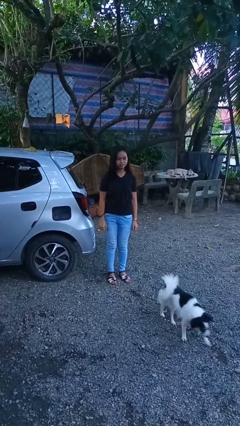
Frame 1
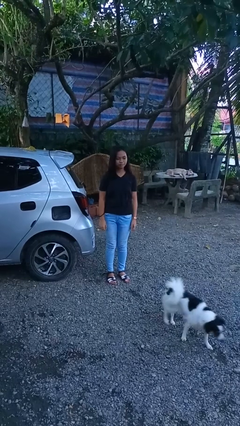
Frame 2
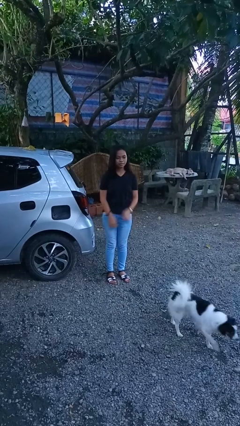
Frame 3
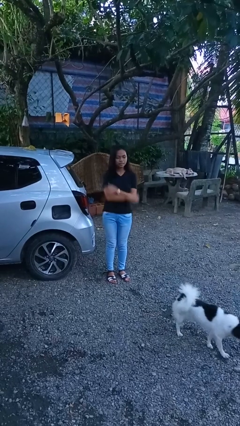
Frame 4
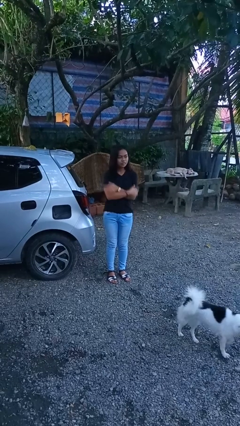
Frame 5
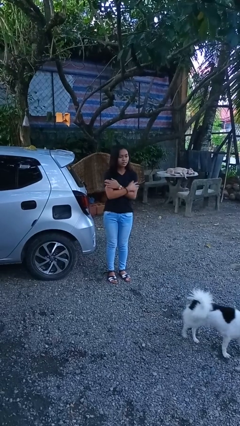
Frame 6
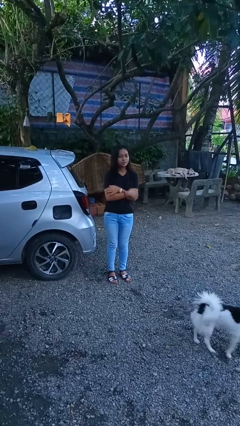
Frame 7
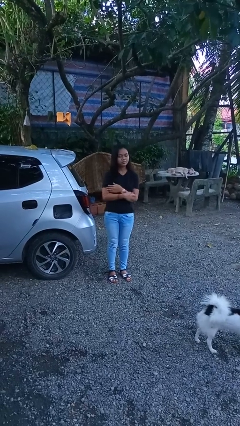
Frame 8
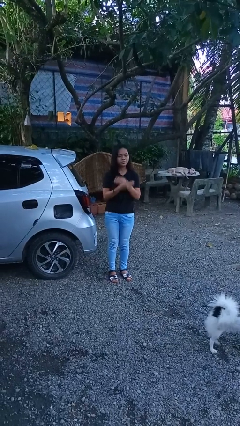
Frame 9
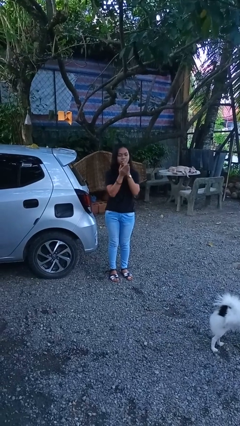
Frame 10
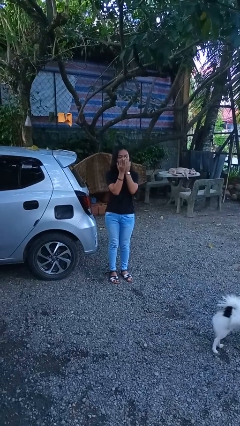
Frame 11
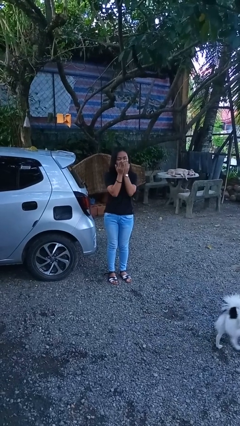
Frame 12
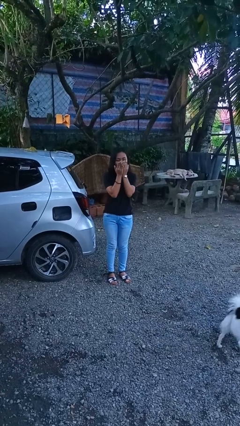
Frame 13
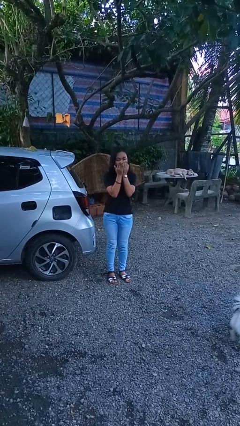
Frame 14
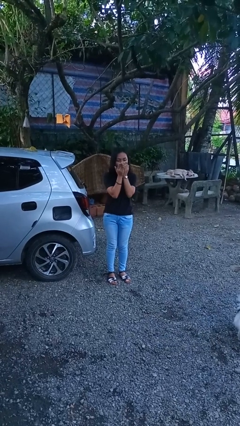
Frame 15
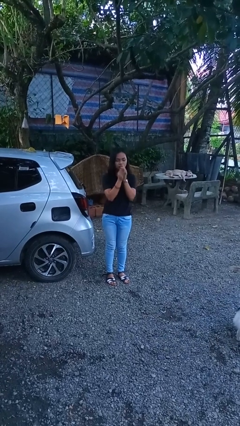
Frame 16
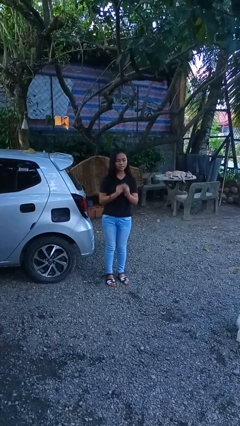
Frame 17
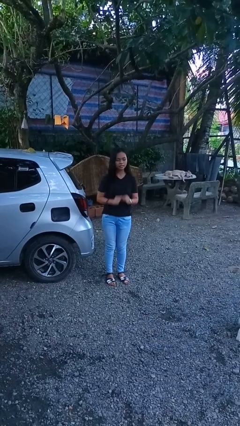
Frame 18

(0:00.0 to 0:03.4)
person blows into hands

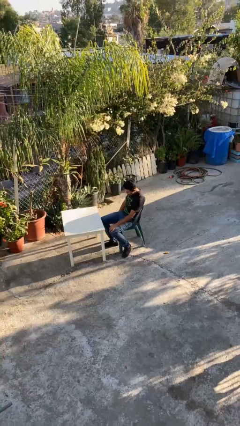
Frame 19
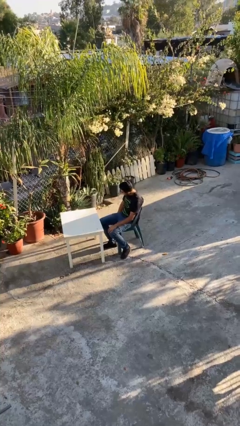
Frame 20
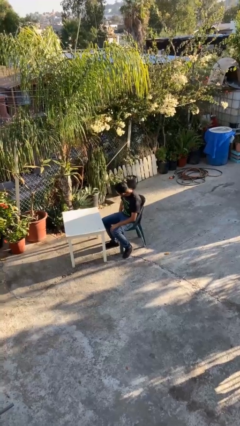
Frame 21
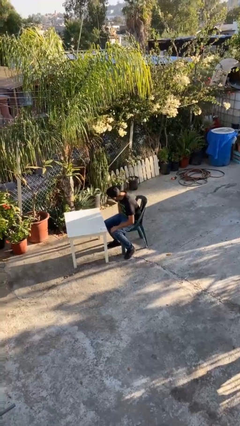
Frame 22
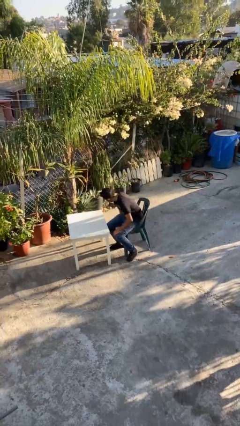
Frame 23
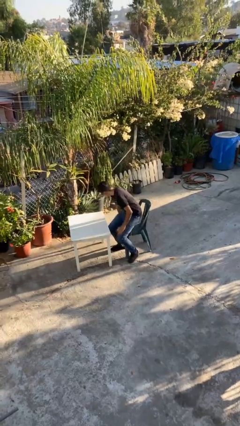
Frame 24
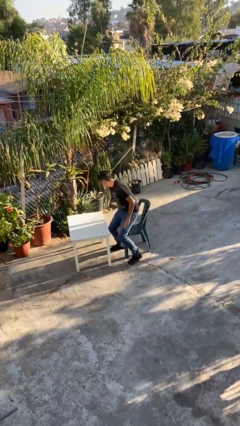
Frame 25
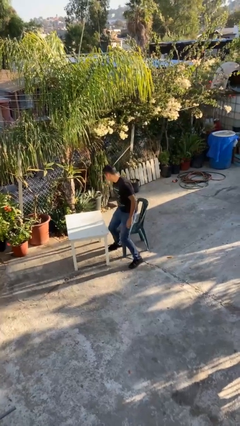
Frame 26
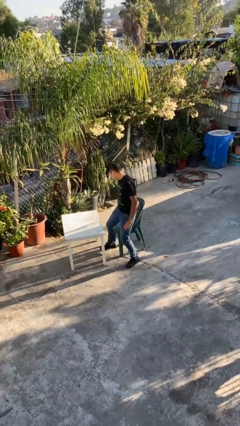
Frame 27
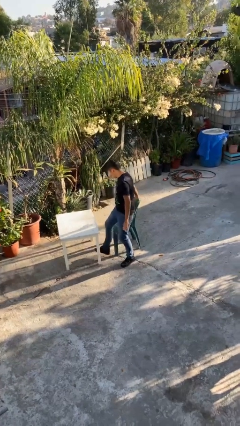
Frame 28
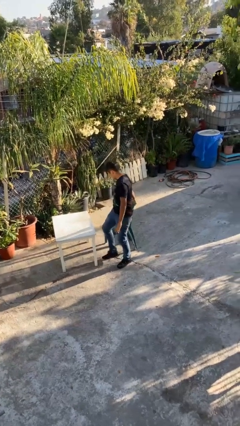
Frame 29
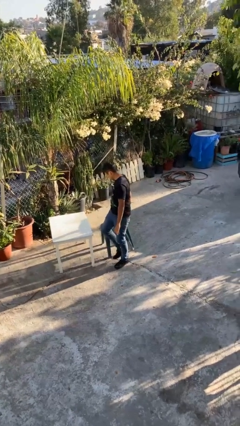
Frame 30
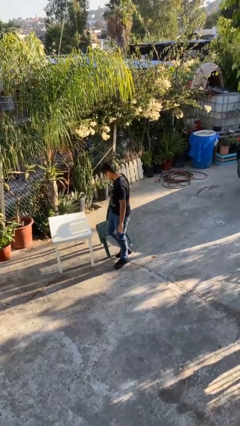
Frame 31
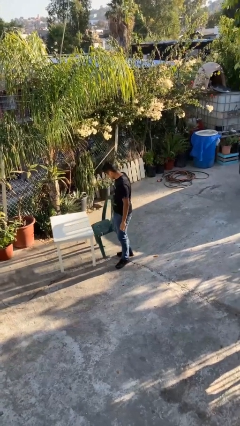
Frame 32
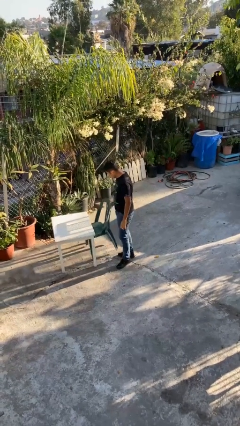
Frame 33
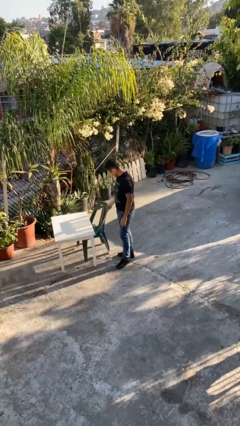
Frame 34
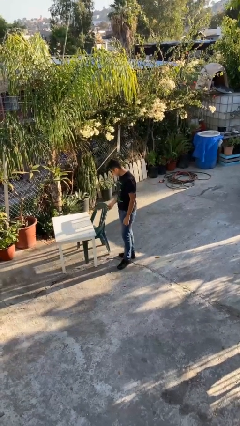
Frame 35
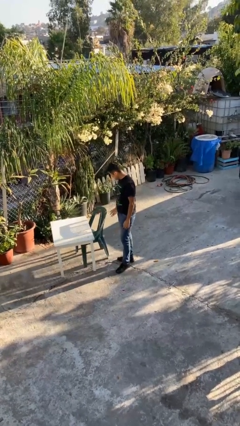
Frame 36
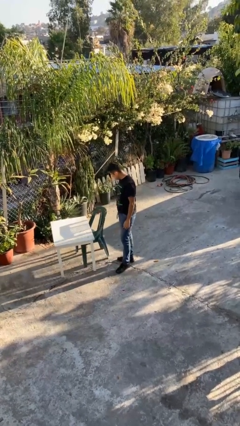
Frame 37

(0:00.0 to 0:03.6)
person stands up

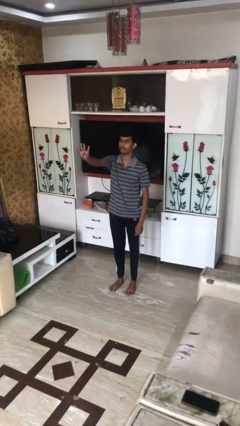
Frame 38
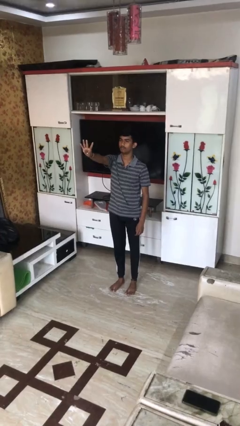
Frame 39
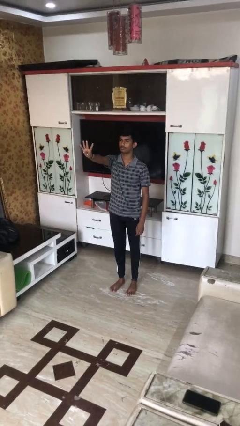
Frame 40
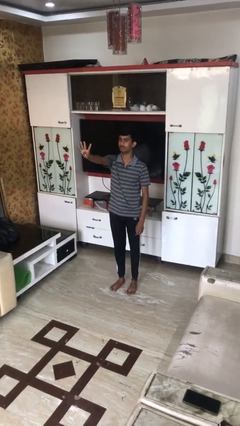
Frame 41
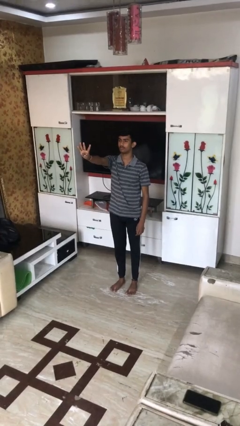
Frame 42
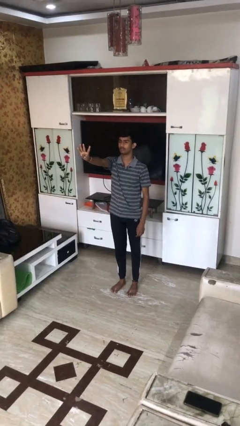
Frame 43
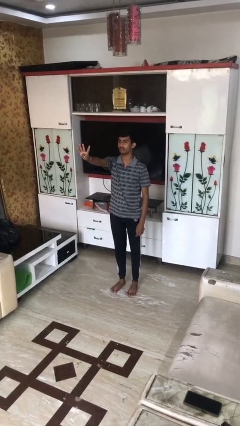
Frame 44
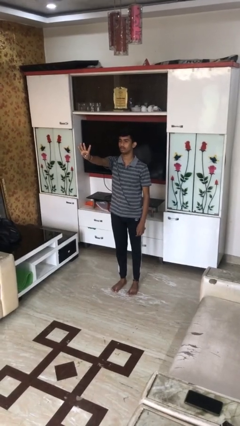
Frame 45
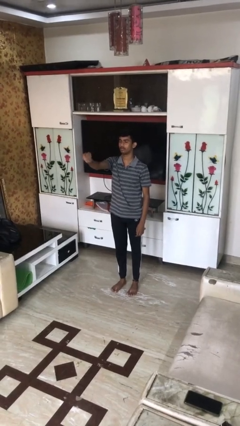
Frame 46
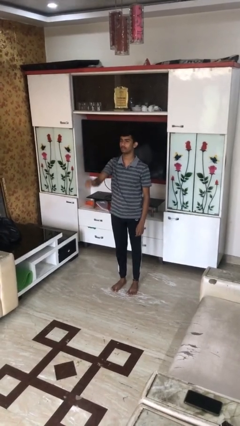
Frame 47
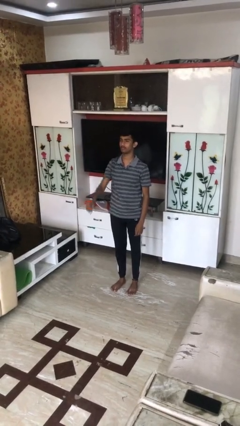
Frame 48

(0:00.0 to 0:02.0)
person gestures number four

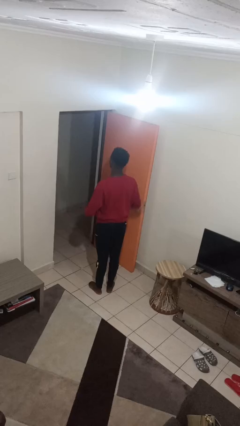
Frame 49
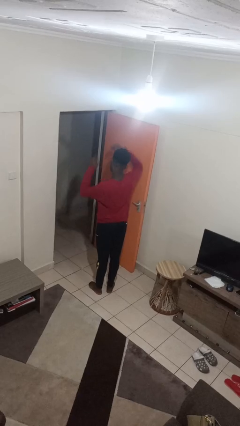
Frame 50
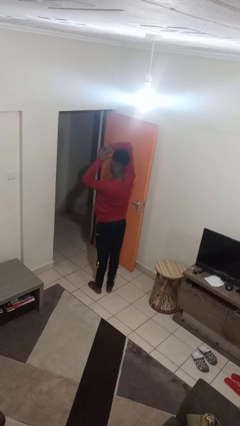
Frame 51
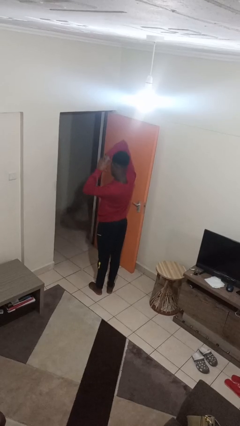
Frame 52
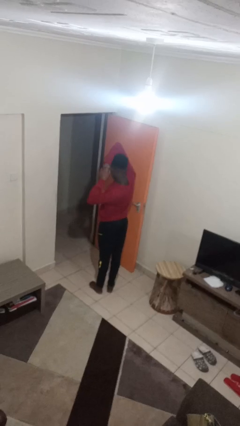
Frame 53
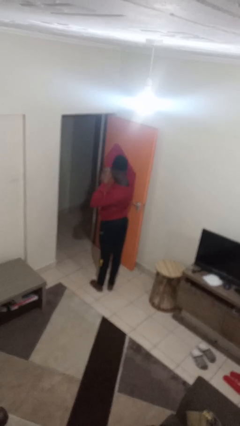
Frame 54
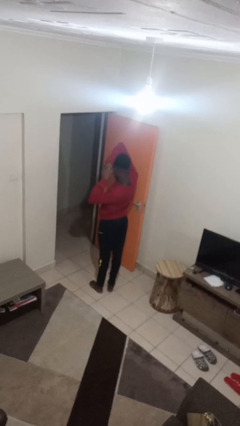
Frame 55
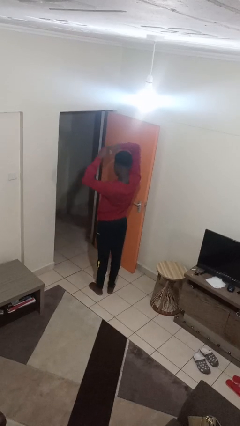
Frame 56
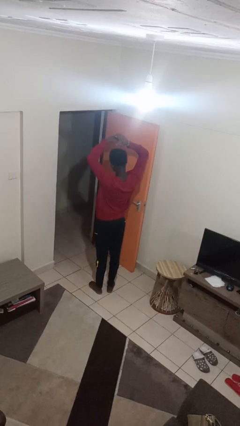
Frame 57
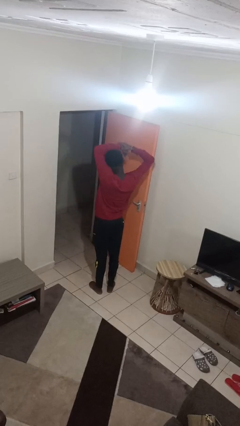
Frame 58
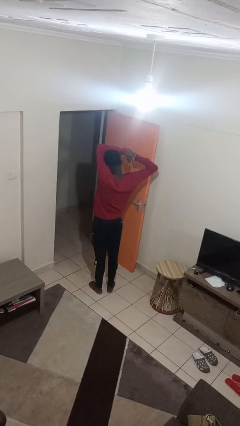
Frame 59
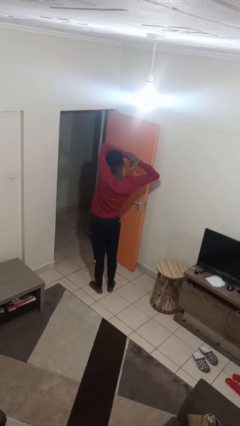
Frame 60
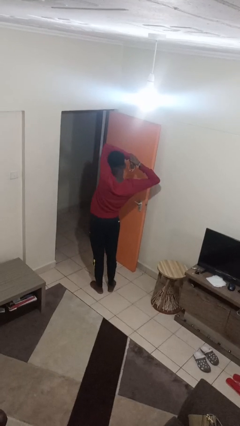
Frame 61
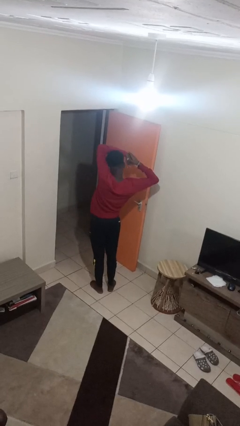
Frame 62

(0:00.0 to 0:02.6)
person stretches arms over head

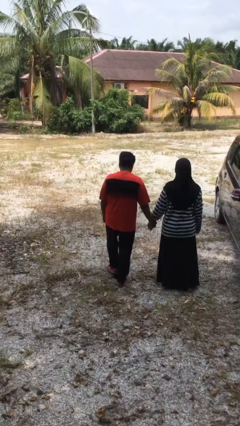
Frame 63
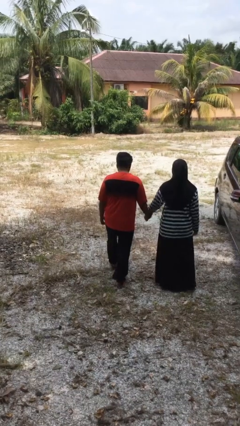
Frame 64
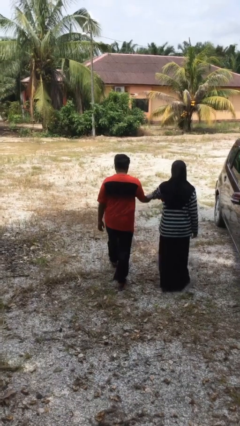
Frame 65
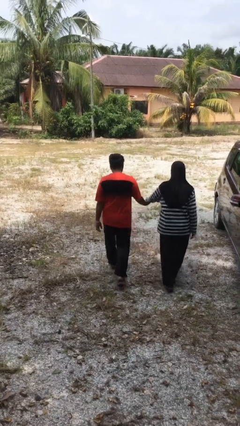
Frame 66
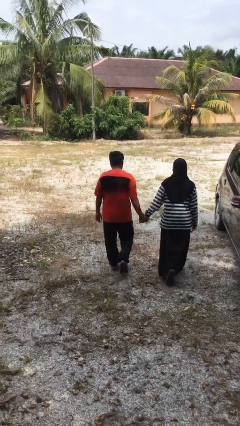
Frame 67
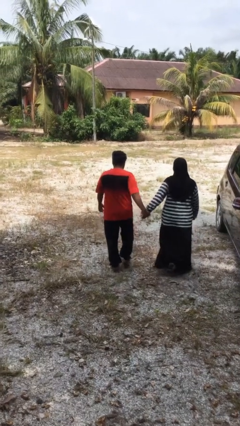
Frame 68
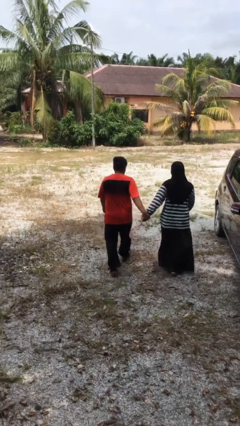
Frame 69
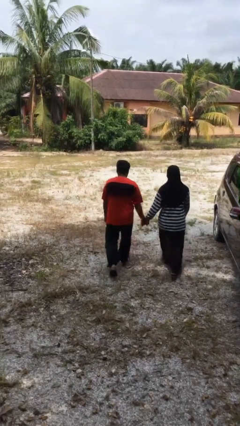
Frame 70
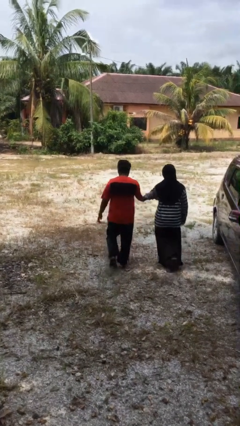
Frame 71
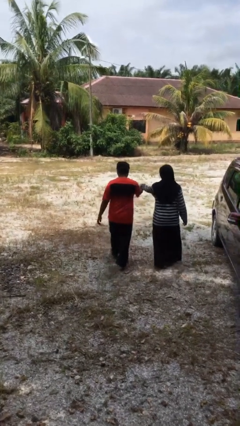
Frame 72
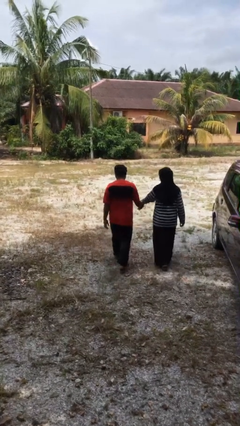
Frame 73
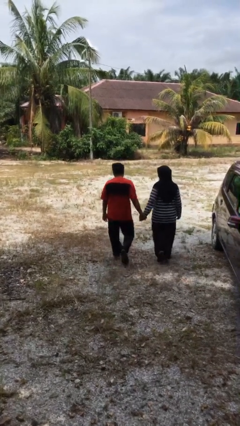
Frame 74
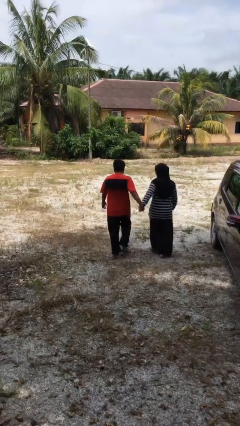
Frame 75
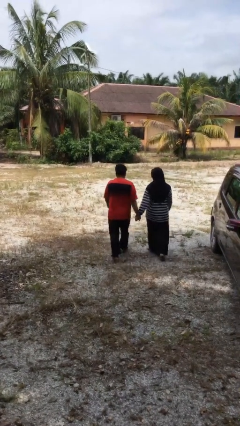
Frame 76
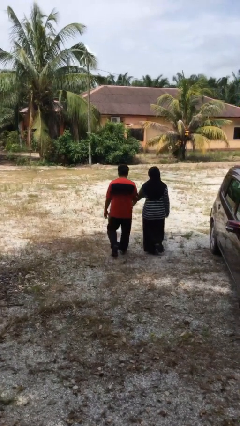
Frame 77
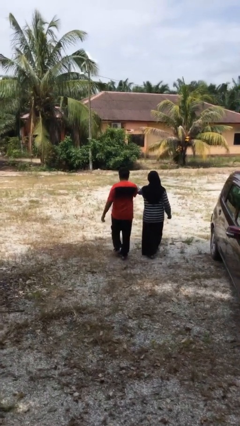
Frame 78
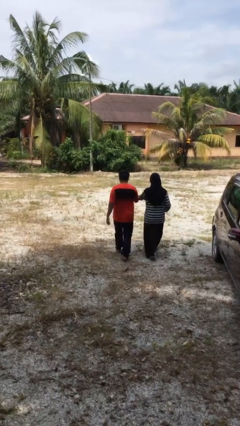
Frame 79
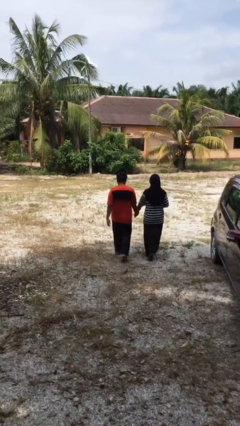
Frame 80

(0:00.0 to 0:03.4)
person holds hand

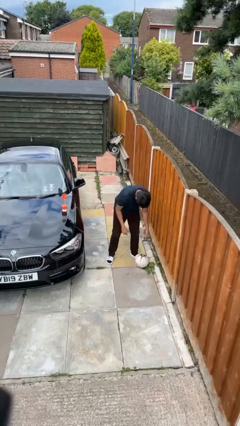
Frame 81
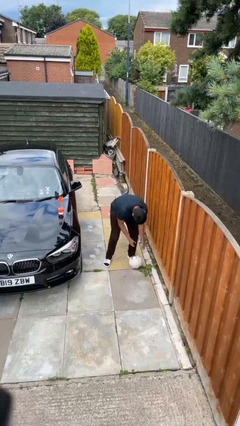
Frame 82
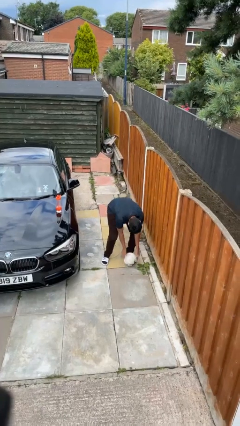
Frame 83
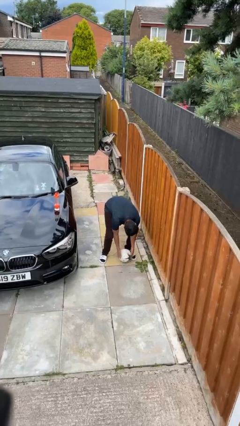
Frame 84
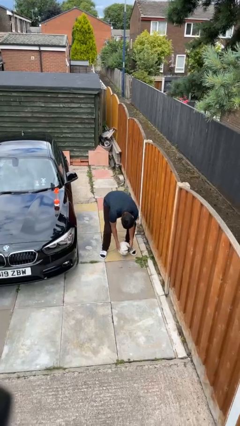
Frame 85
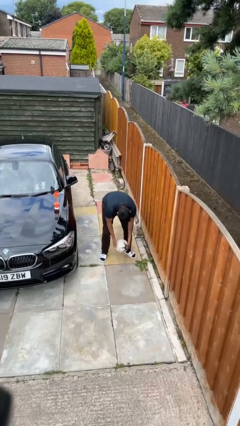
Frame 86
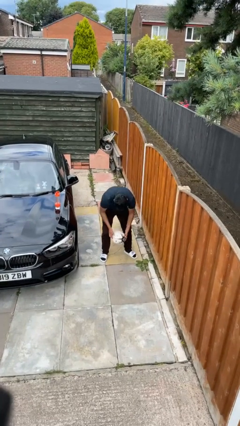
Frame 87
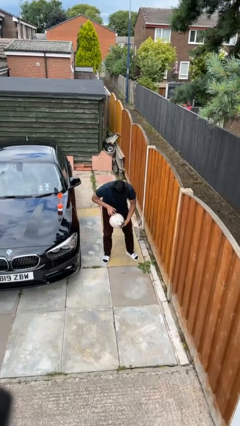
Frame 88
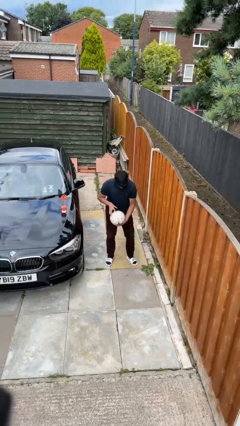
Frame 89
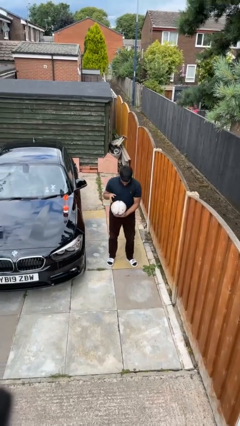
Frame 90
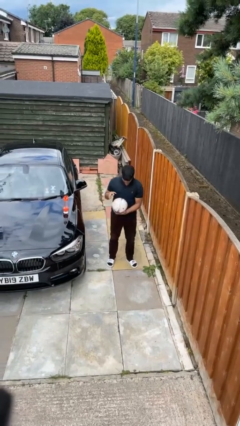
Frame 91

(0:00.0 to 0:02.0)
person picks up object from floor
